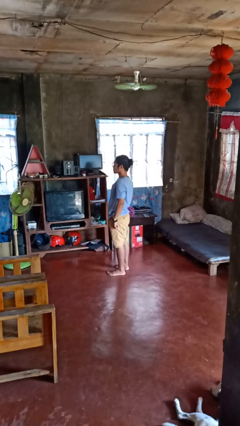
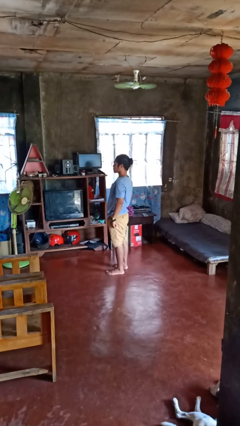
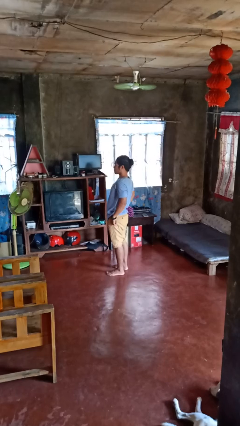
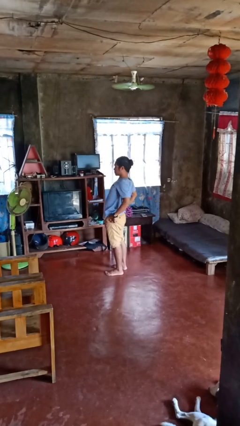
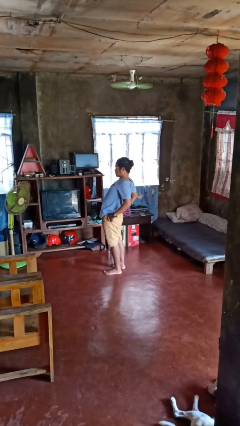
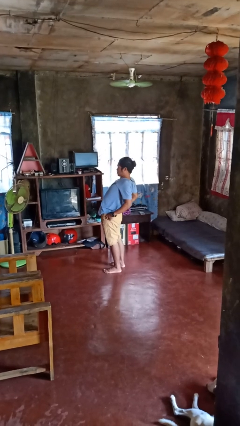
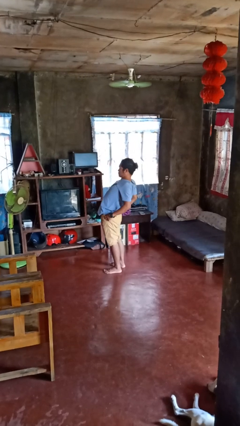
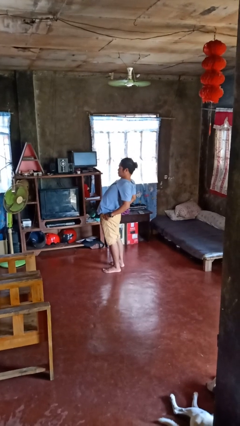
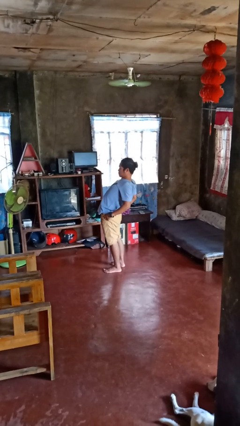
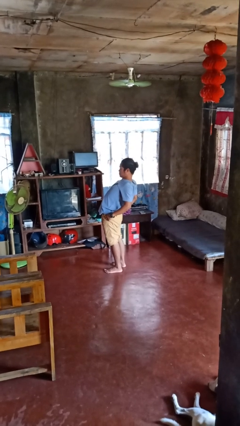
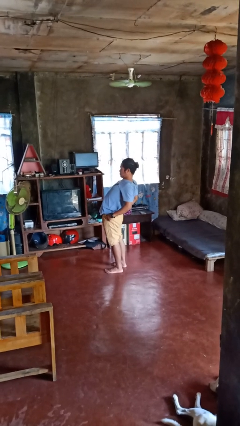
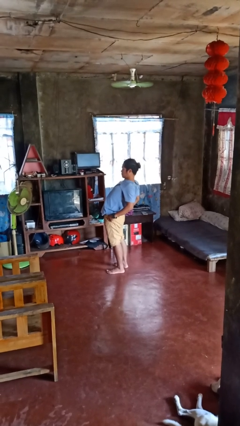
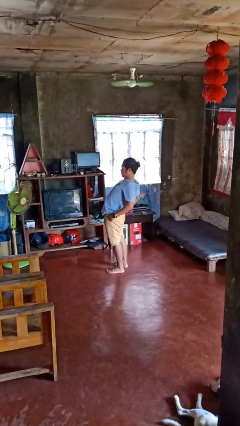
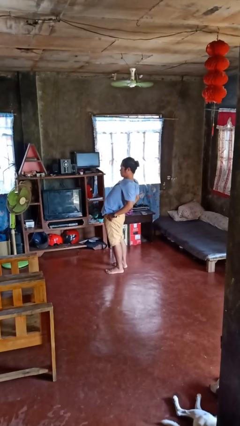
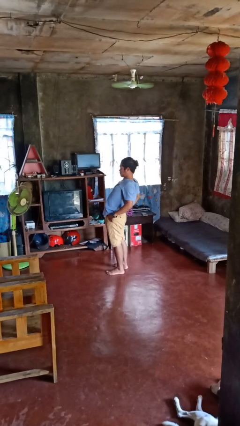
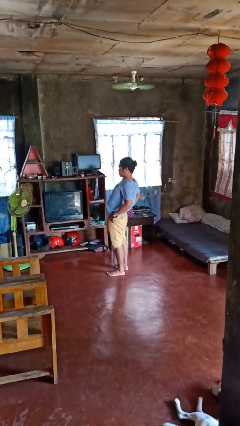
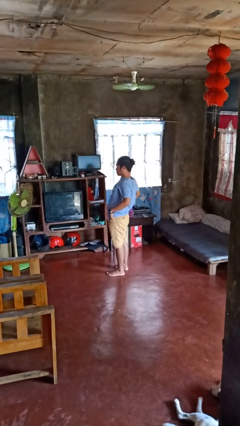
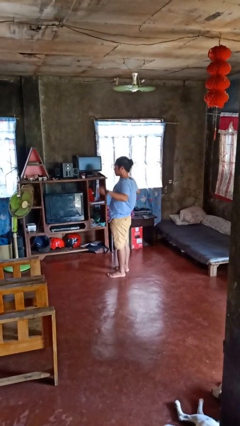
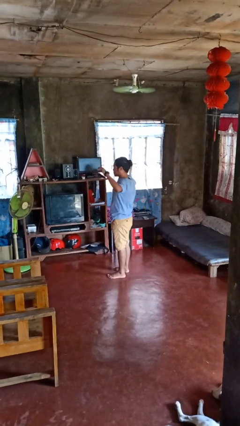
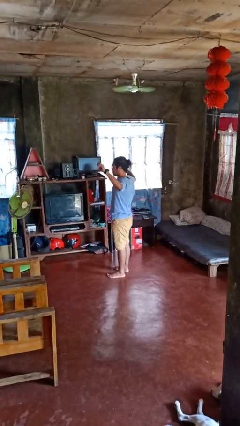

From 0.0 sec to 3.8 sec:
person stretches back

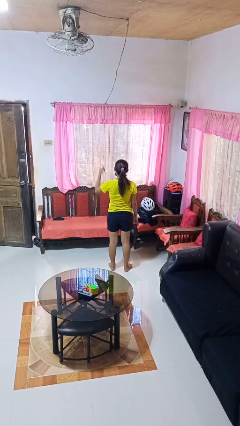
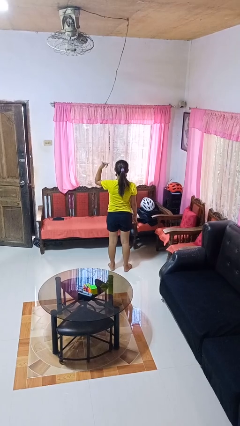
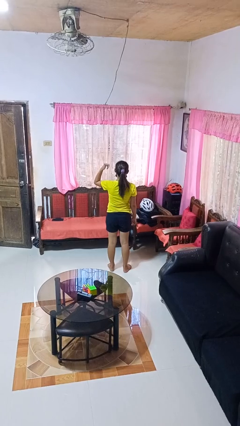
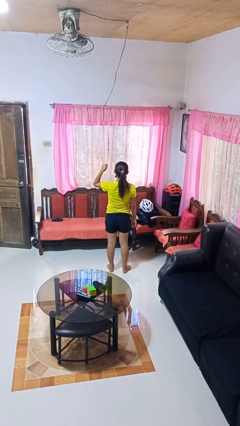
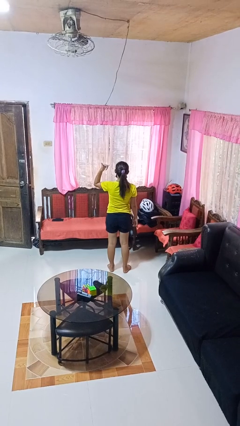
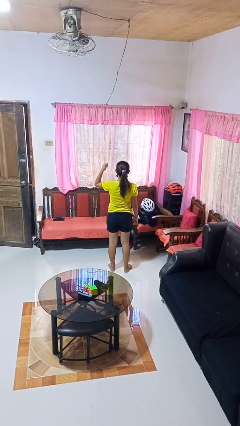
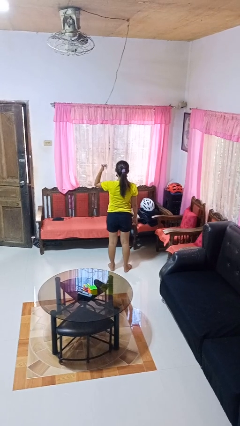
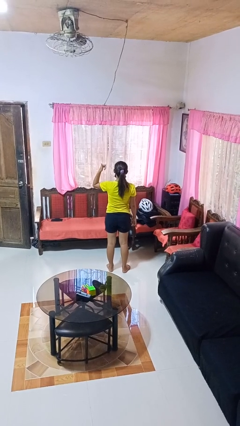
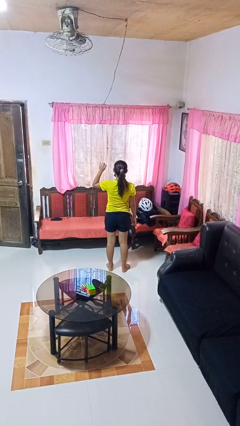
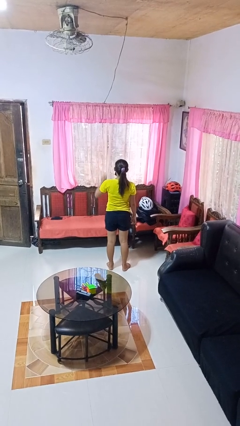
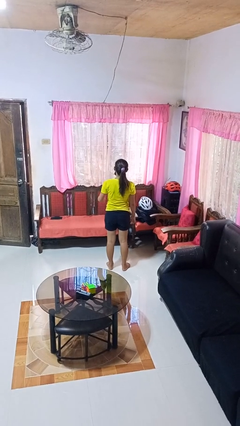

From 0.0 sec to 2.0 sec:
person gestures hang loose

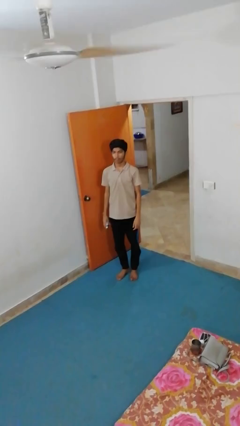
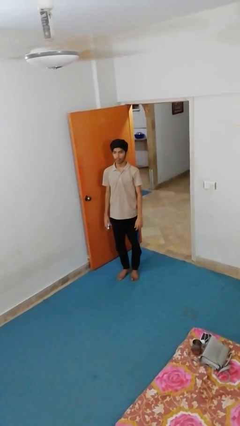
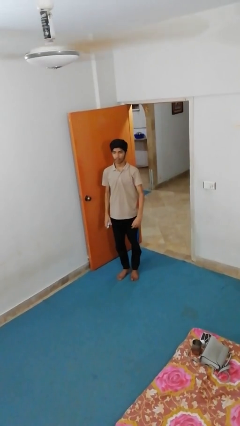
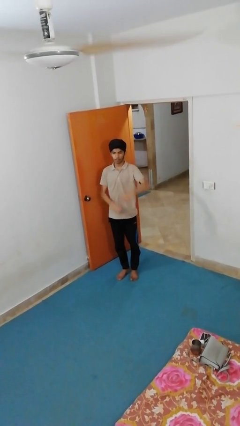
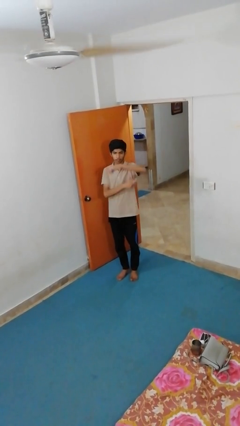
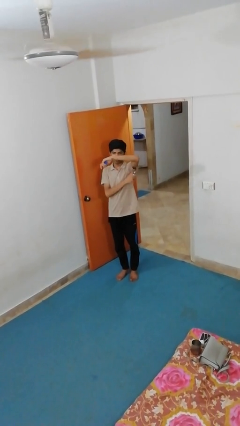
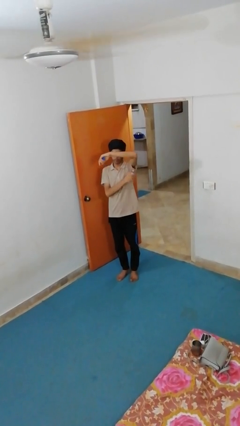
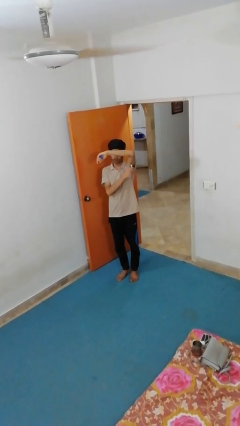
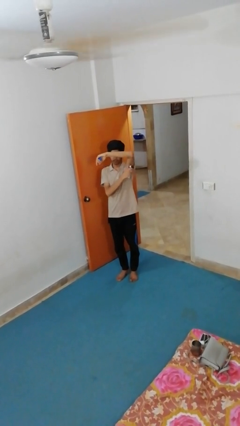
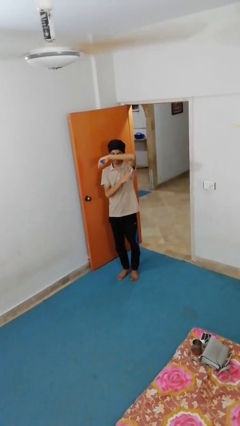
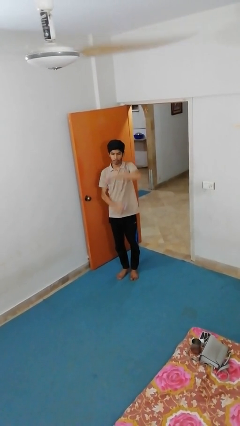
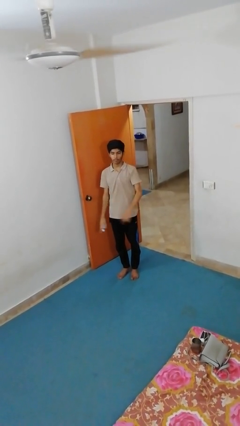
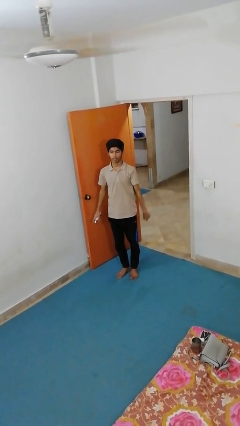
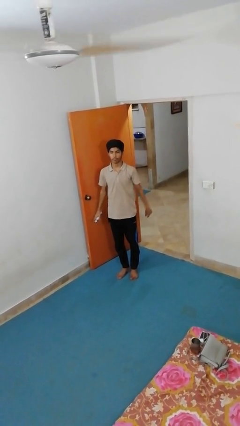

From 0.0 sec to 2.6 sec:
person applies deodorant

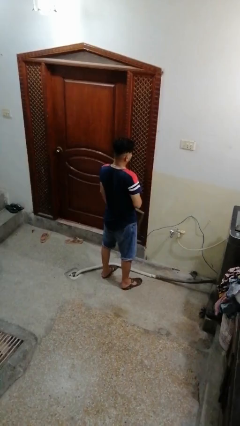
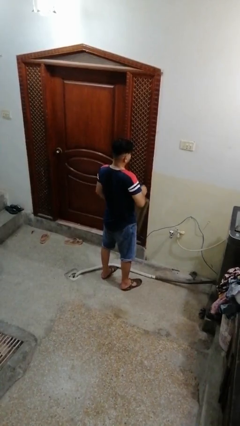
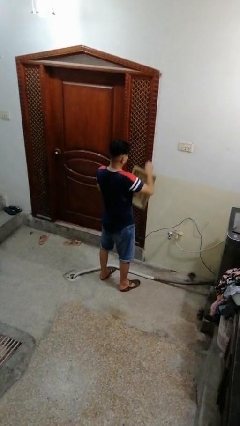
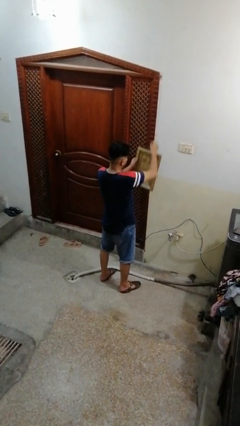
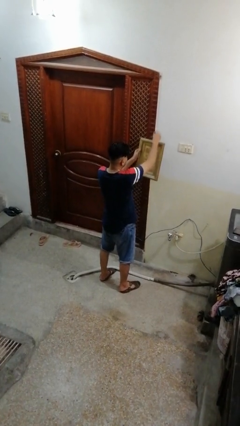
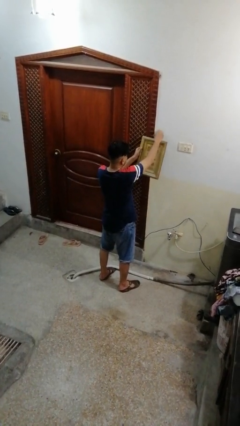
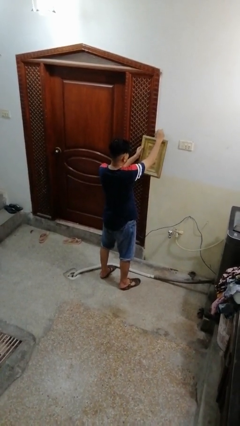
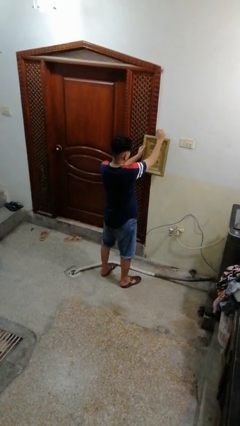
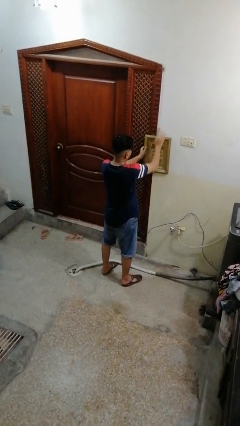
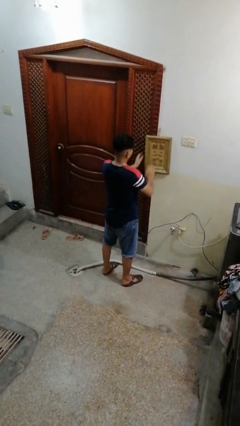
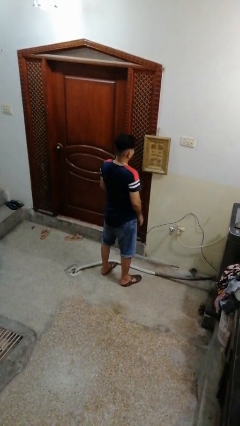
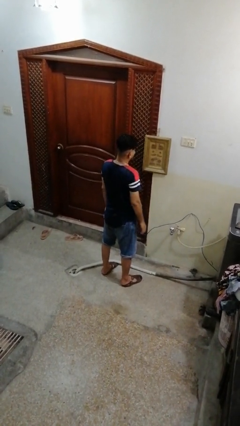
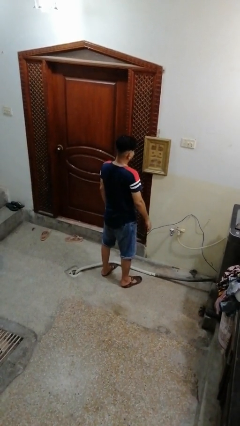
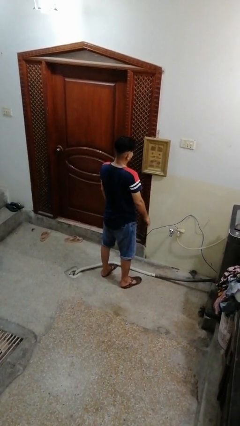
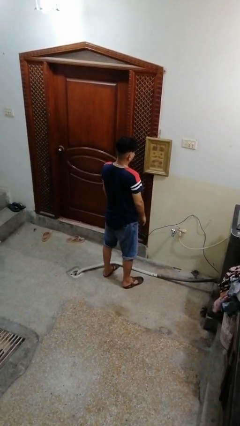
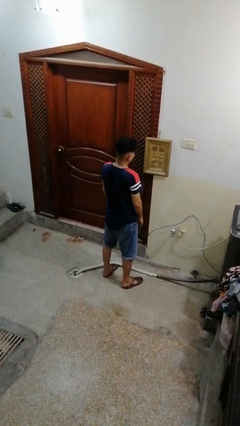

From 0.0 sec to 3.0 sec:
person puts up picture frame

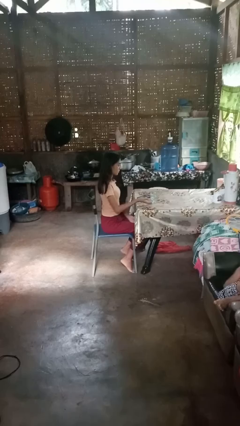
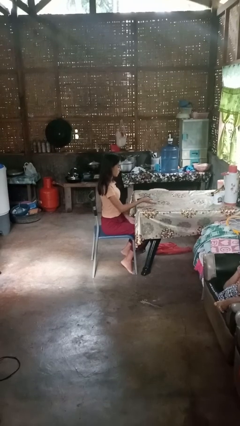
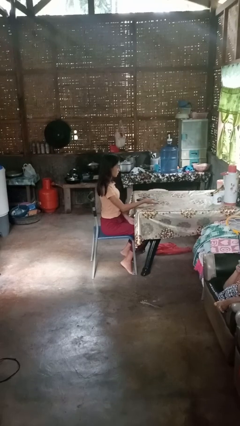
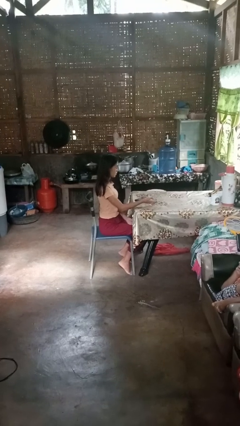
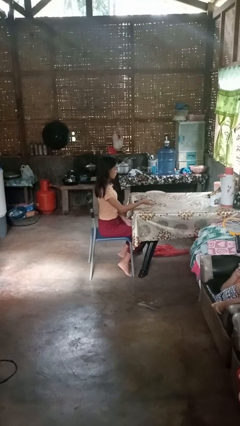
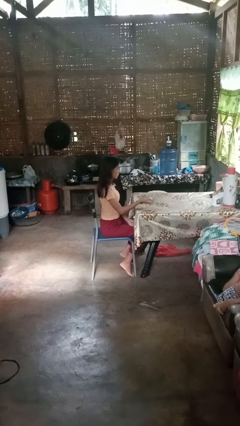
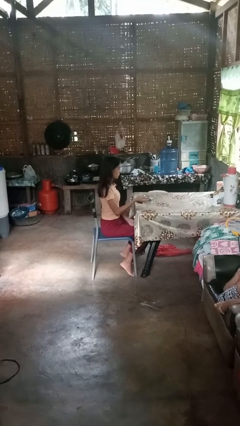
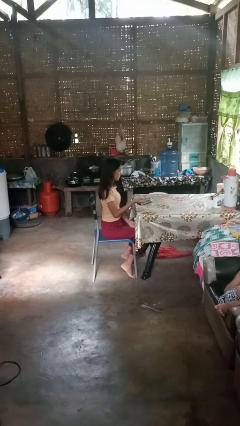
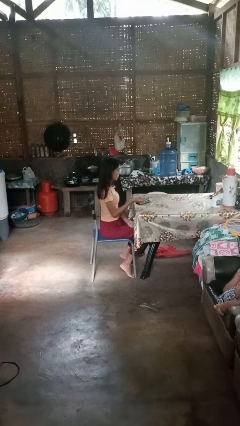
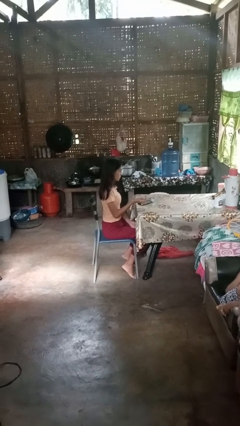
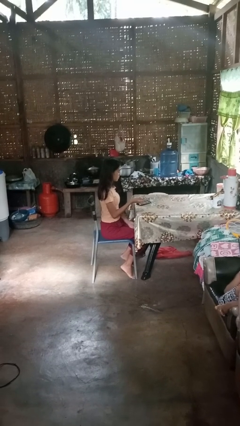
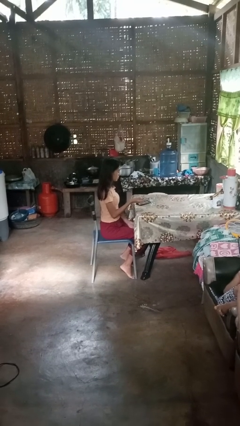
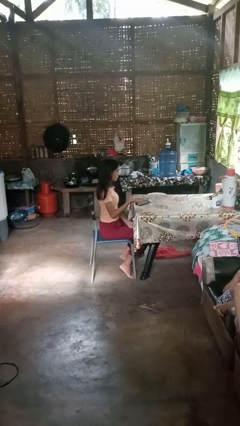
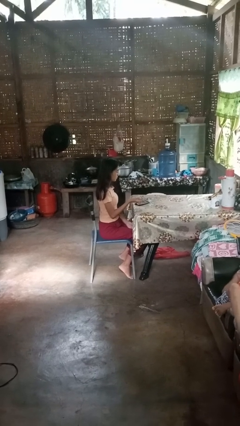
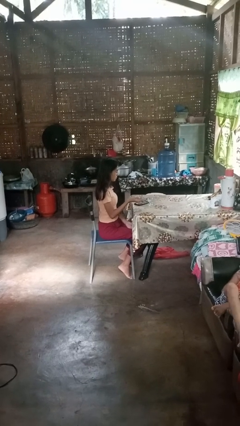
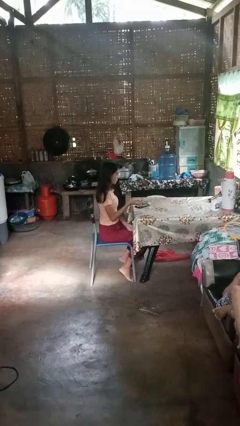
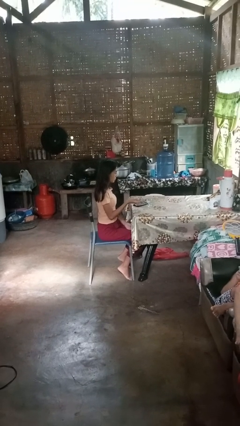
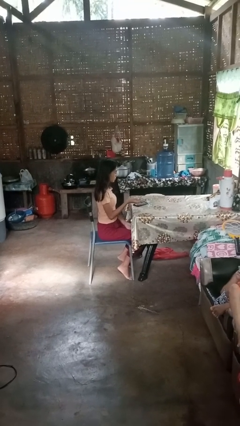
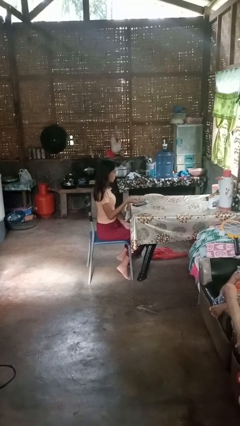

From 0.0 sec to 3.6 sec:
person picks up object from table

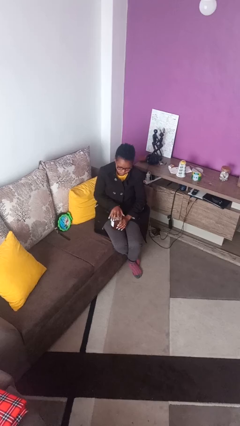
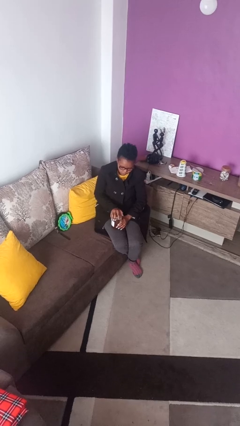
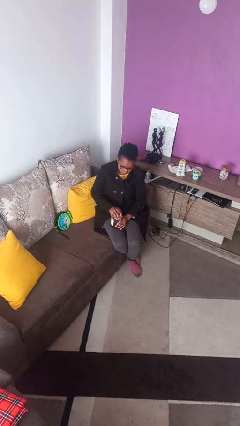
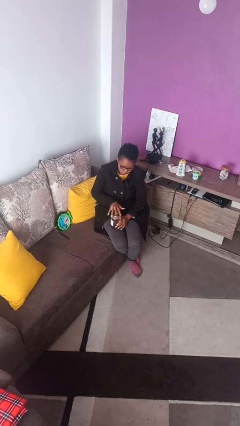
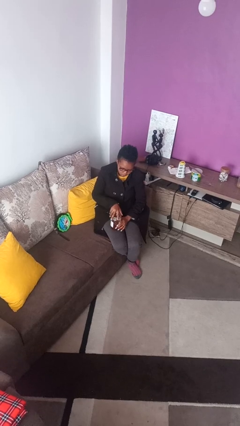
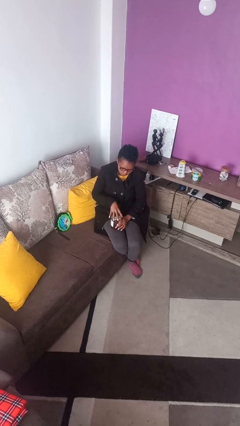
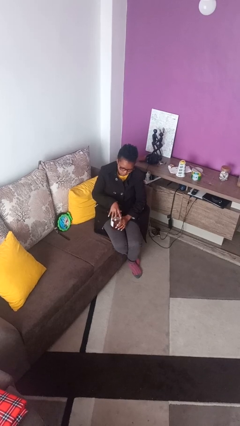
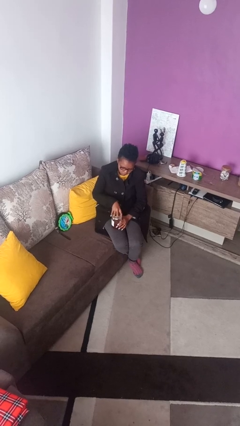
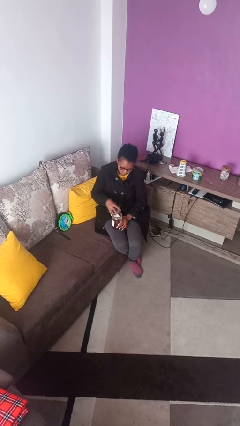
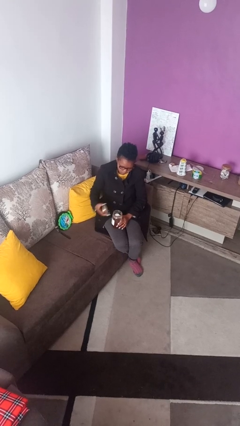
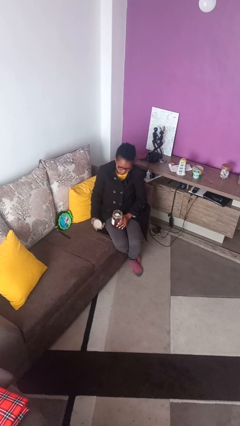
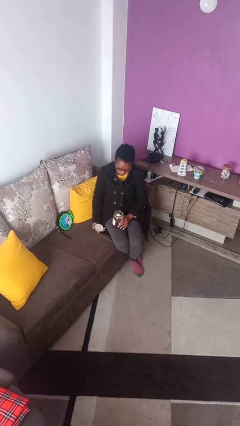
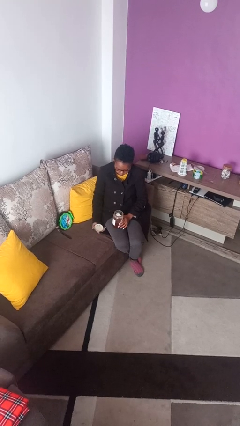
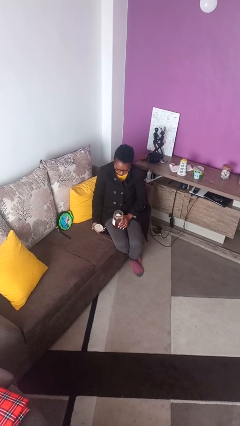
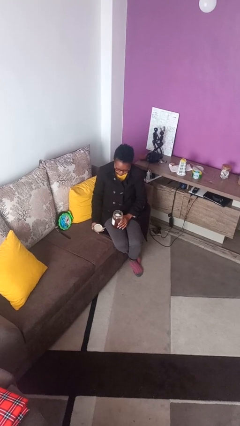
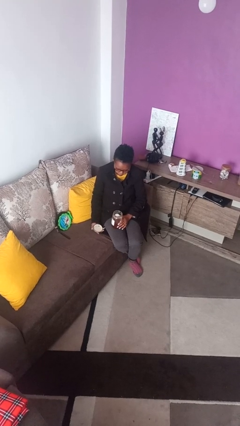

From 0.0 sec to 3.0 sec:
person opens jar
